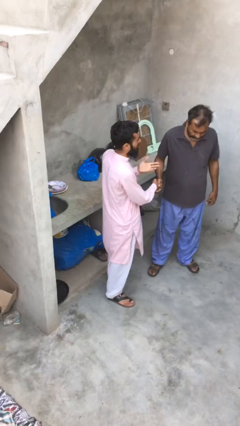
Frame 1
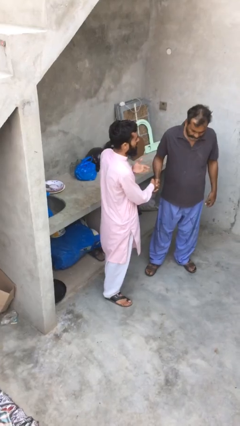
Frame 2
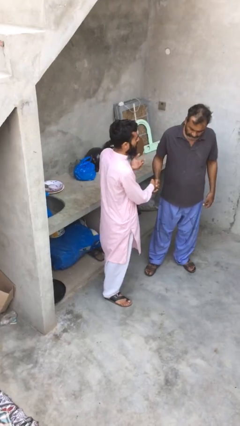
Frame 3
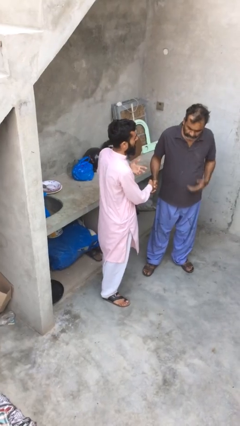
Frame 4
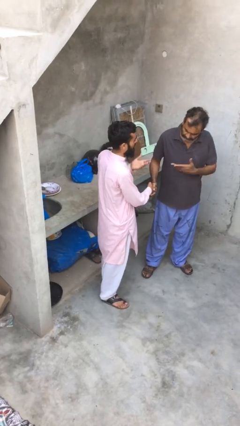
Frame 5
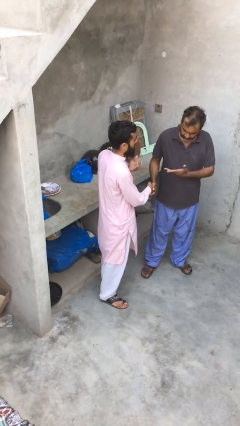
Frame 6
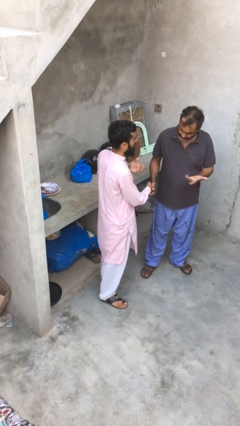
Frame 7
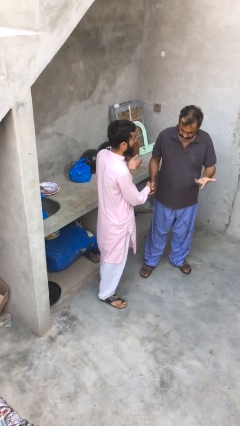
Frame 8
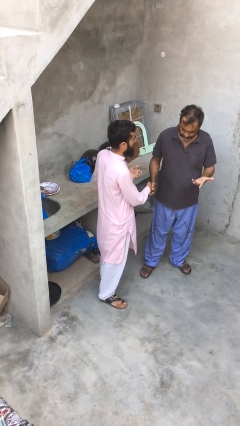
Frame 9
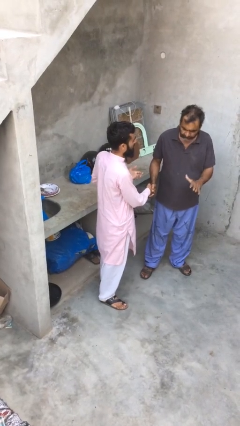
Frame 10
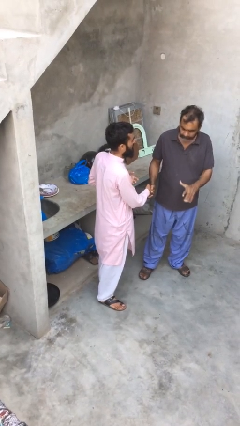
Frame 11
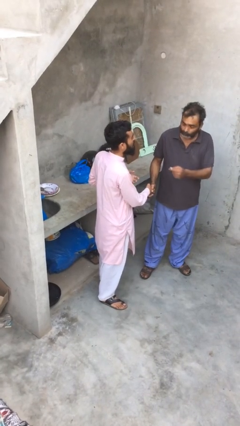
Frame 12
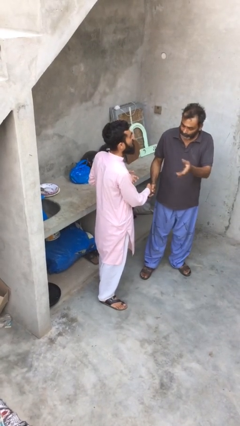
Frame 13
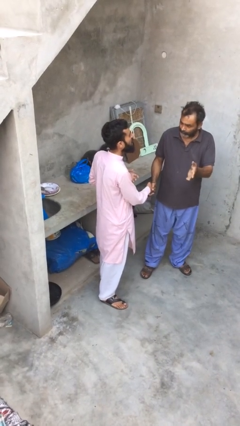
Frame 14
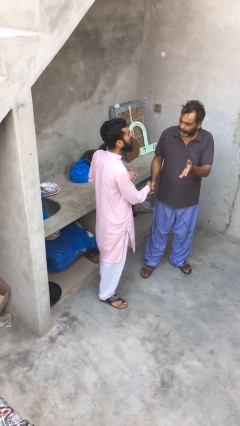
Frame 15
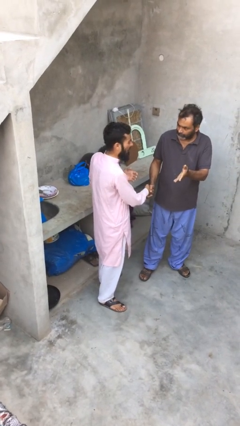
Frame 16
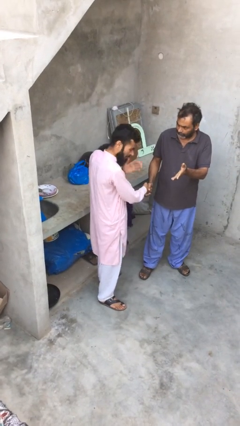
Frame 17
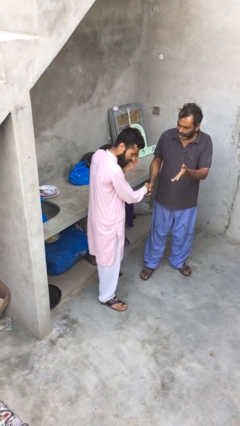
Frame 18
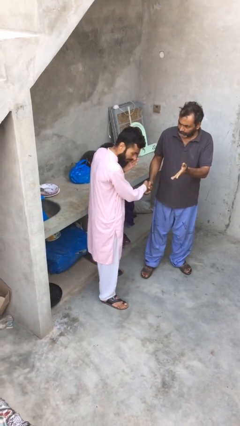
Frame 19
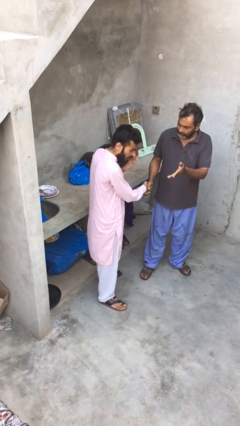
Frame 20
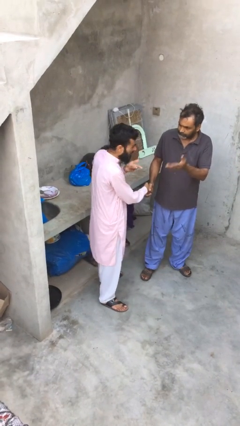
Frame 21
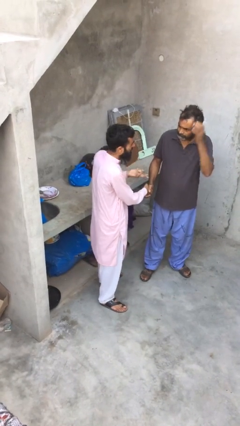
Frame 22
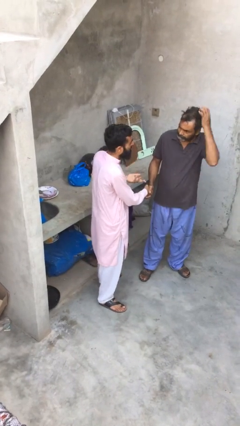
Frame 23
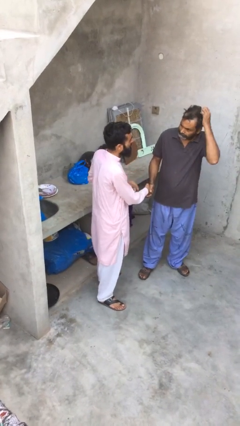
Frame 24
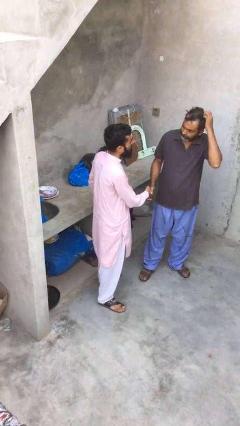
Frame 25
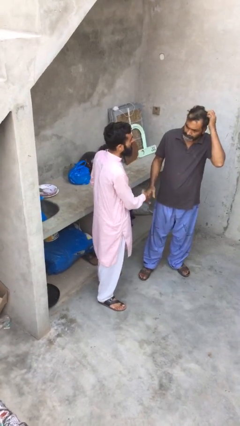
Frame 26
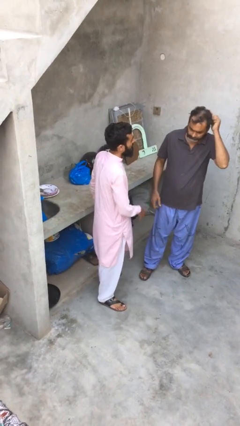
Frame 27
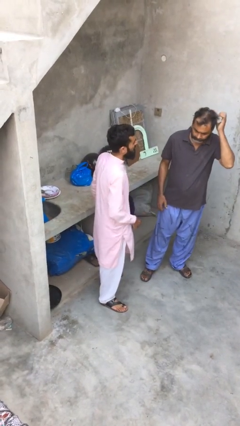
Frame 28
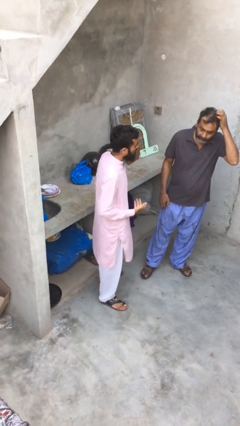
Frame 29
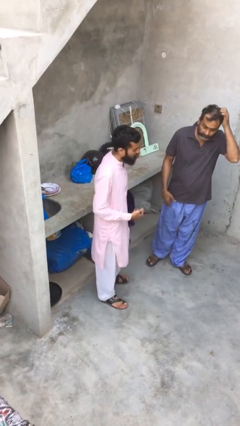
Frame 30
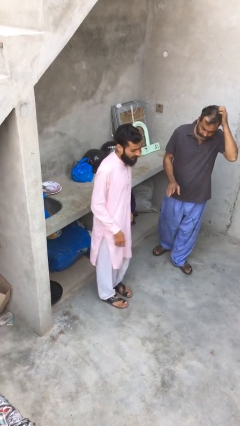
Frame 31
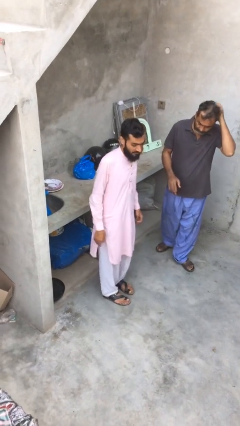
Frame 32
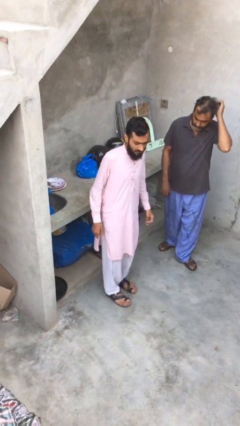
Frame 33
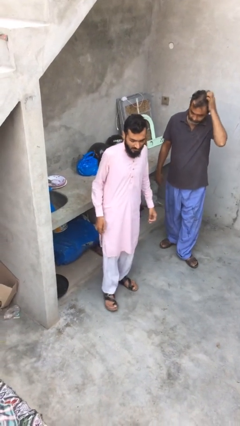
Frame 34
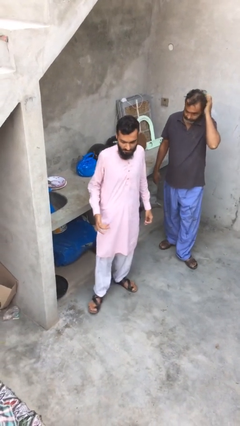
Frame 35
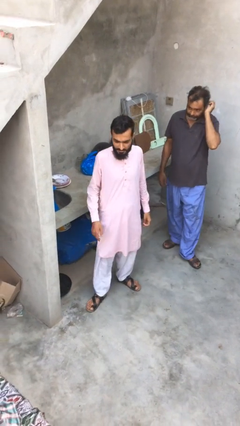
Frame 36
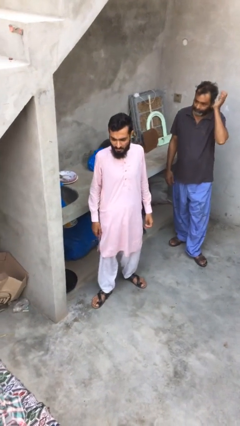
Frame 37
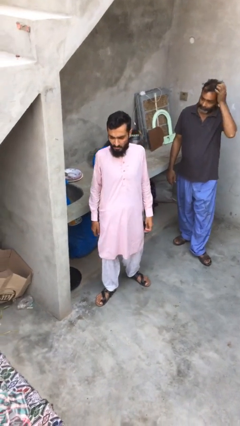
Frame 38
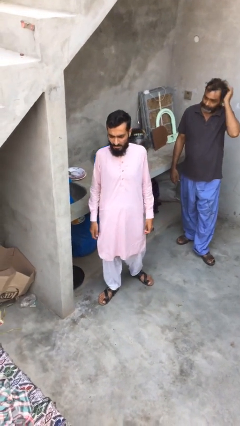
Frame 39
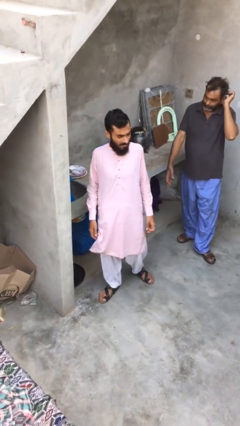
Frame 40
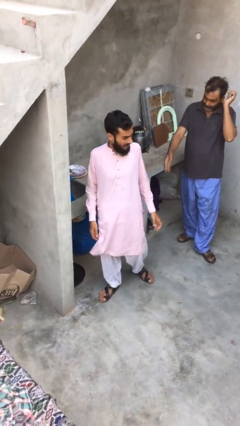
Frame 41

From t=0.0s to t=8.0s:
person talks to person

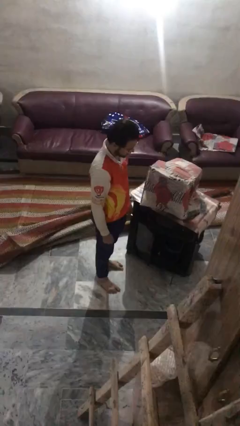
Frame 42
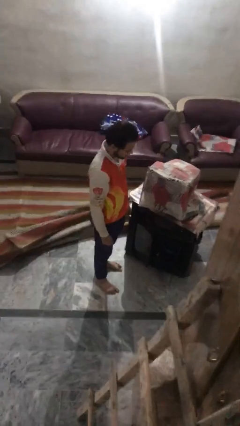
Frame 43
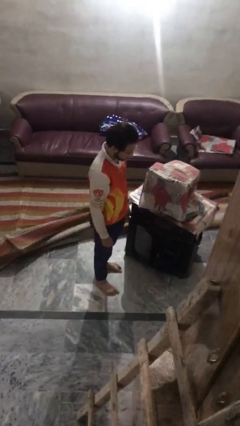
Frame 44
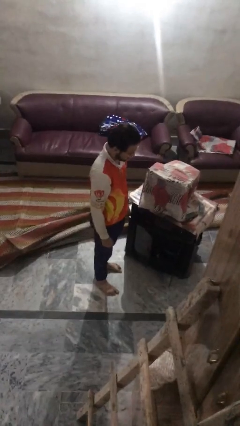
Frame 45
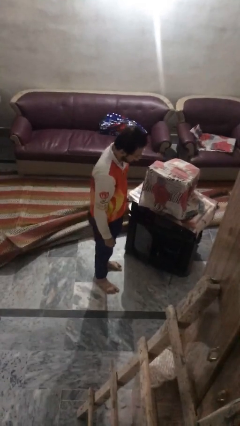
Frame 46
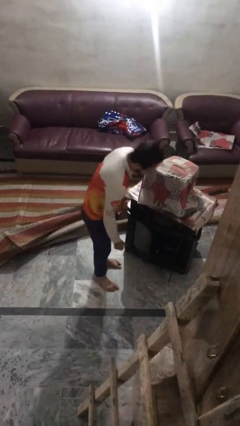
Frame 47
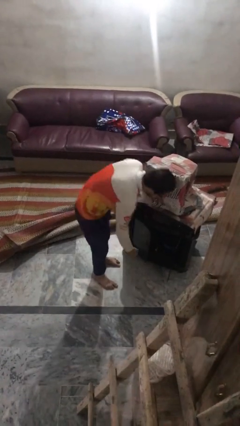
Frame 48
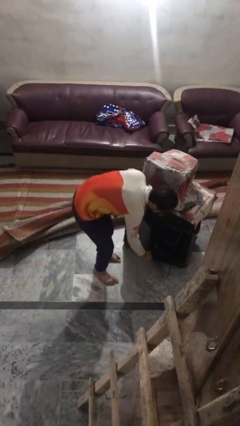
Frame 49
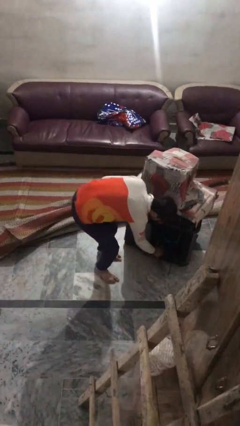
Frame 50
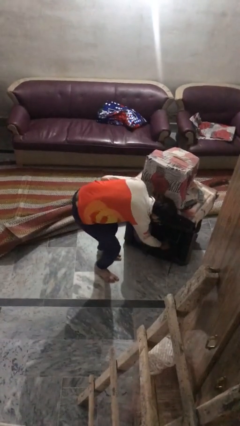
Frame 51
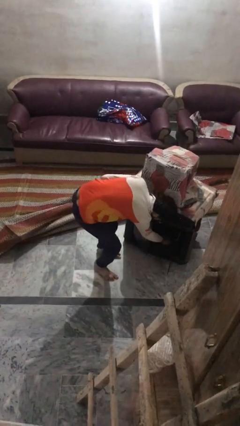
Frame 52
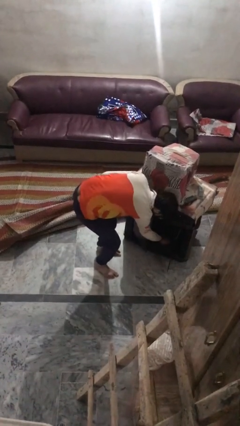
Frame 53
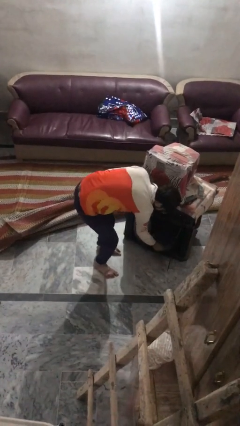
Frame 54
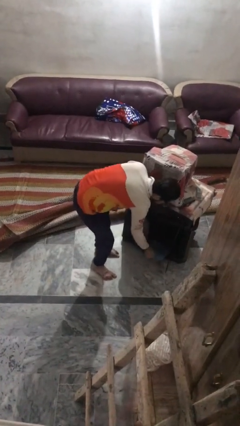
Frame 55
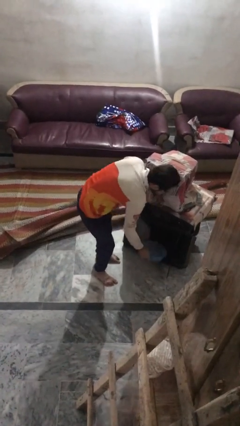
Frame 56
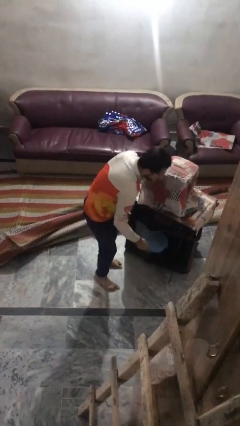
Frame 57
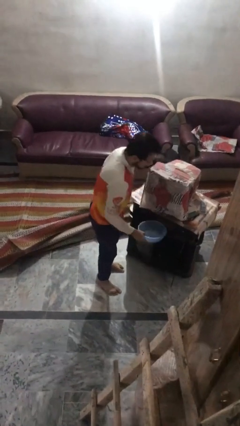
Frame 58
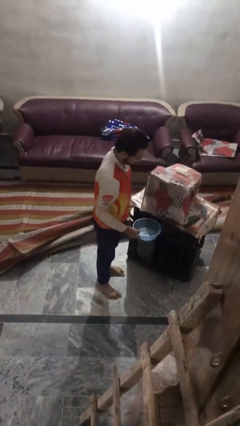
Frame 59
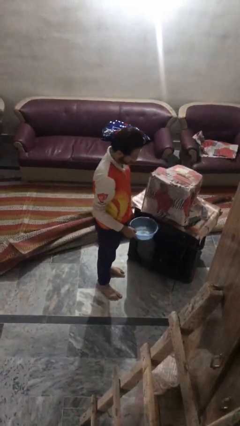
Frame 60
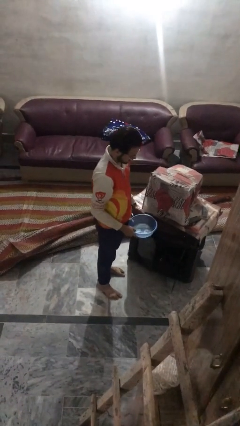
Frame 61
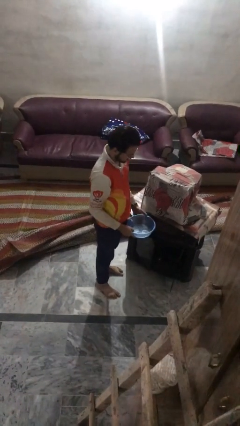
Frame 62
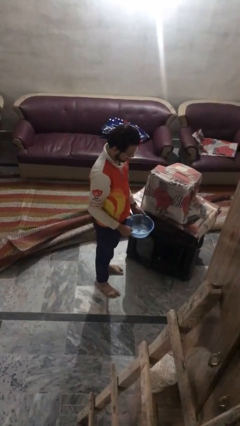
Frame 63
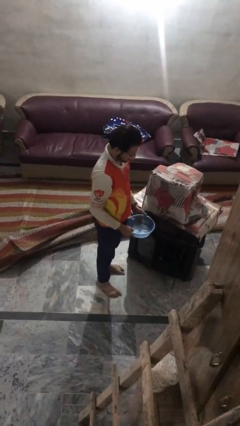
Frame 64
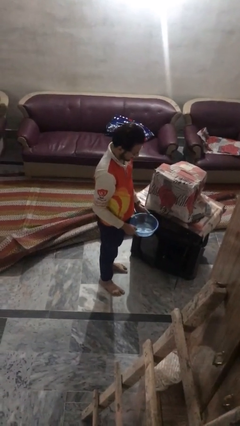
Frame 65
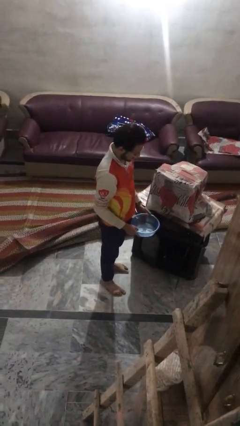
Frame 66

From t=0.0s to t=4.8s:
person picks up object from cabinet

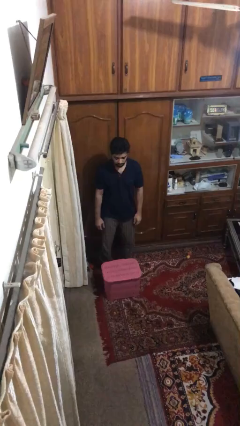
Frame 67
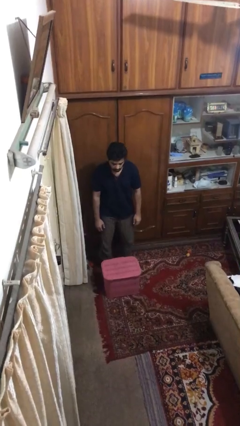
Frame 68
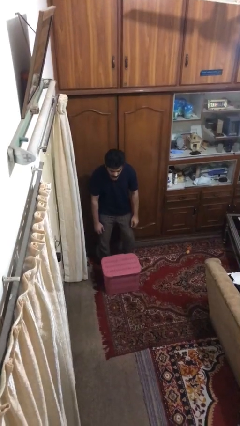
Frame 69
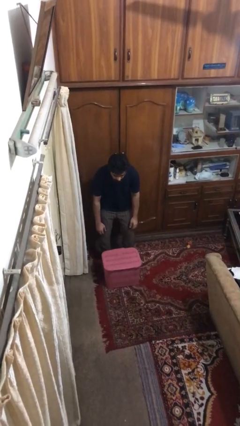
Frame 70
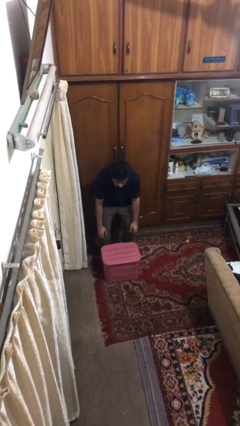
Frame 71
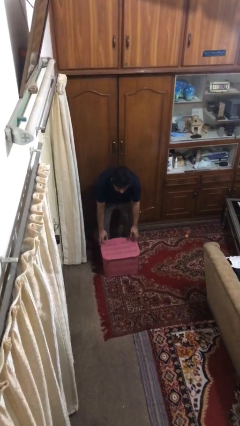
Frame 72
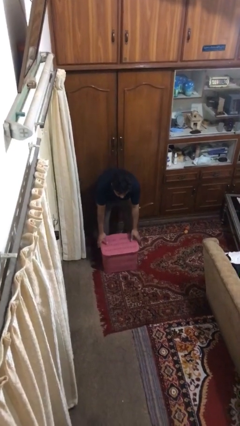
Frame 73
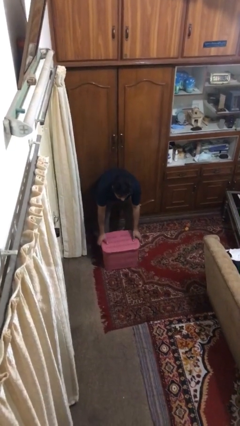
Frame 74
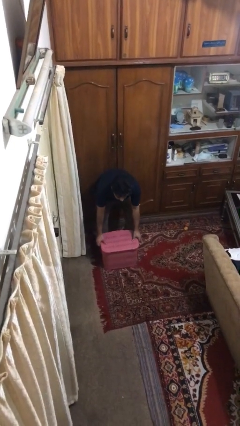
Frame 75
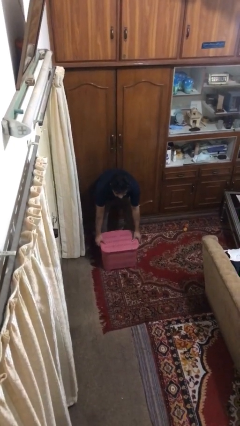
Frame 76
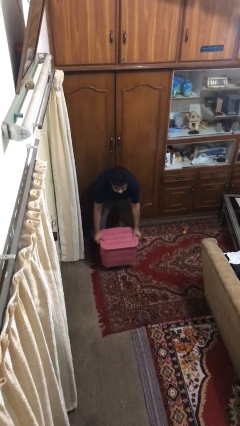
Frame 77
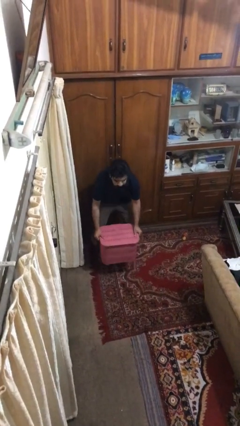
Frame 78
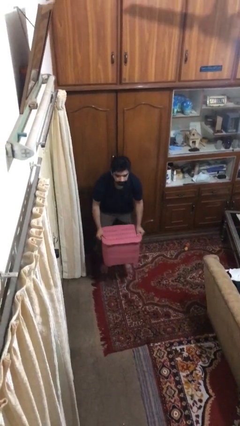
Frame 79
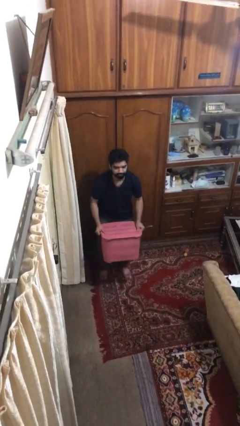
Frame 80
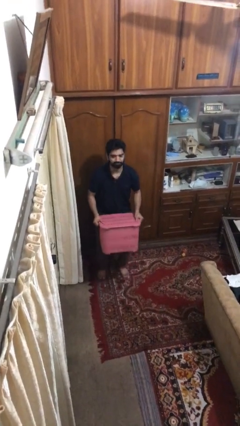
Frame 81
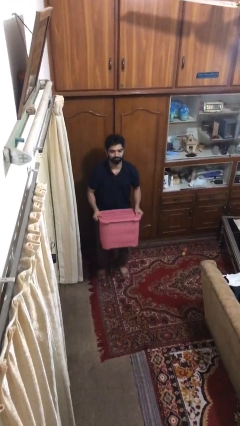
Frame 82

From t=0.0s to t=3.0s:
person picks up object from floor

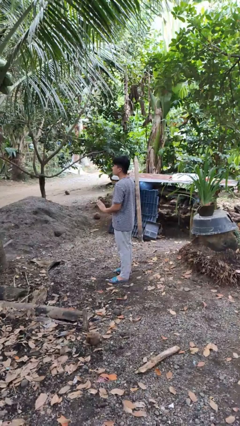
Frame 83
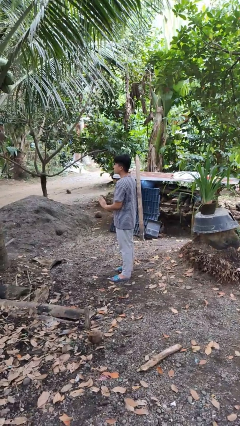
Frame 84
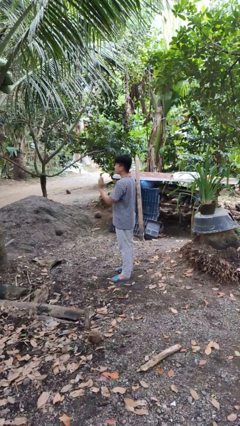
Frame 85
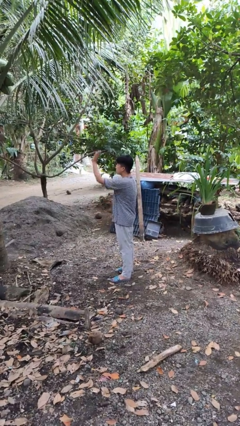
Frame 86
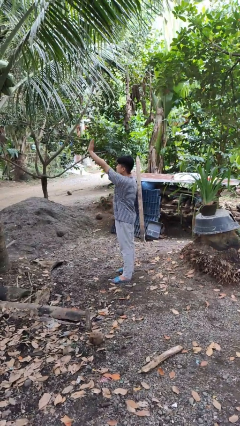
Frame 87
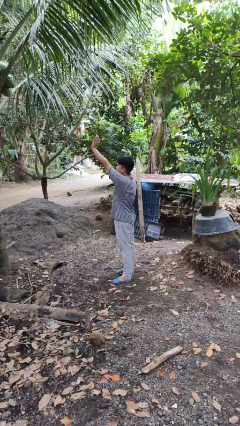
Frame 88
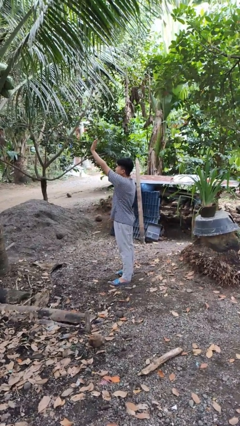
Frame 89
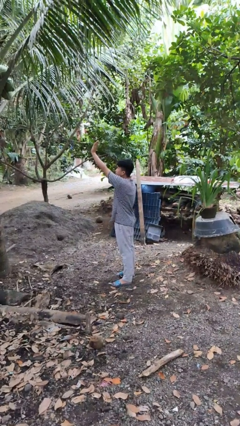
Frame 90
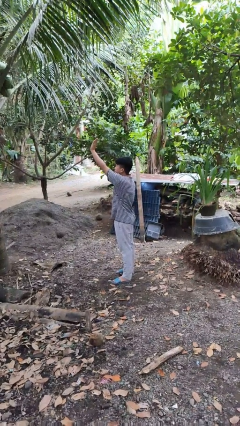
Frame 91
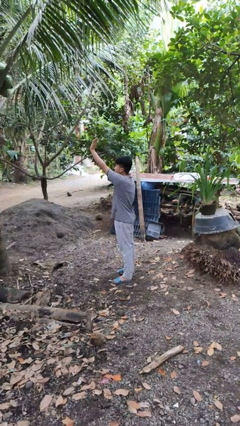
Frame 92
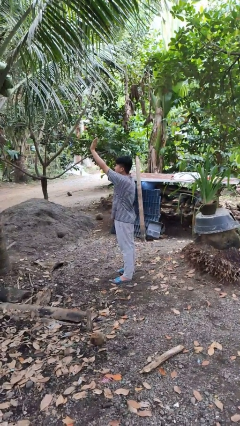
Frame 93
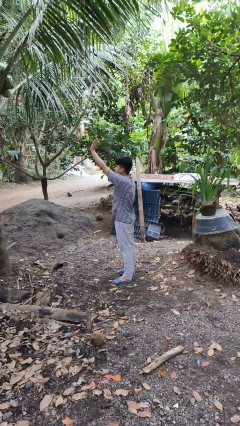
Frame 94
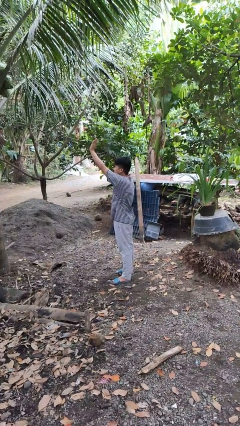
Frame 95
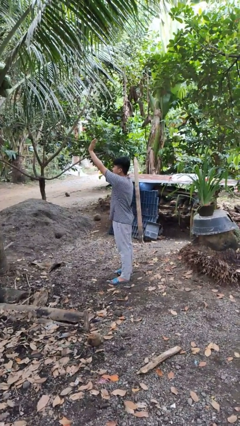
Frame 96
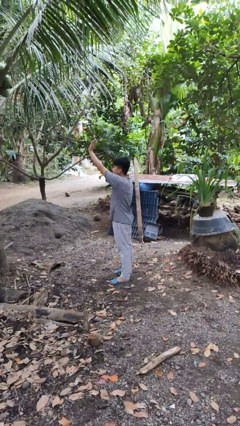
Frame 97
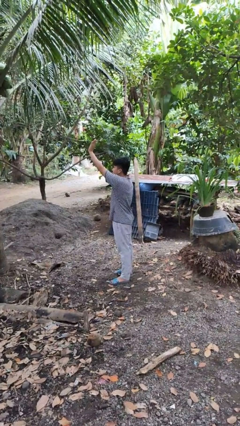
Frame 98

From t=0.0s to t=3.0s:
person gestures swipe up
